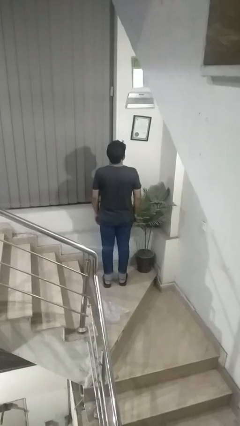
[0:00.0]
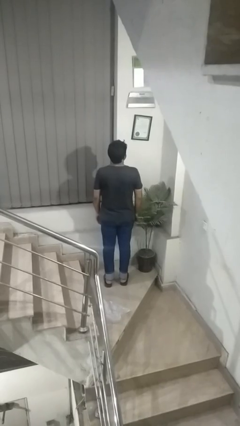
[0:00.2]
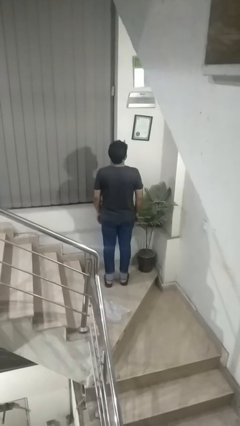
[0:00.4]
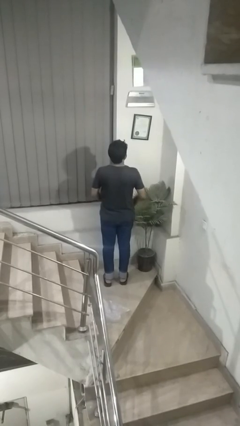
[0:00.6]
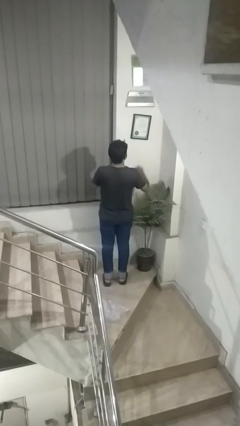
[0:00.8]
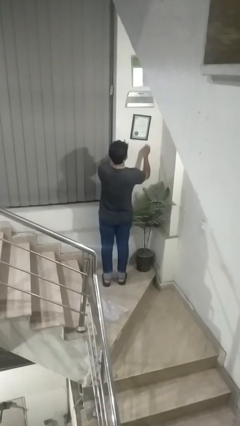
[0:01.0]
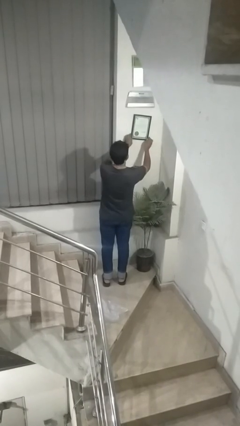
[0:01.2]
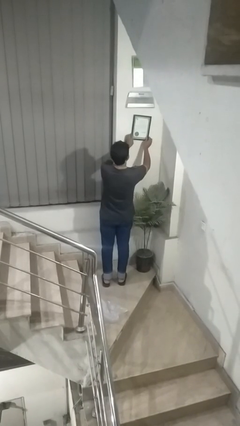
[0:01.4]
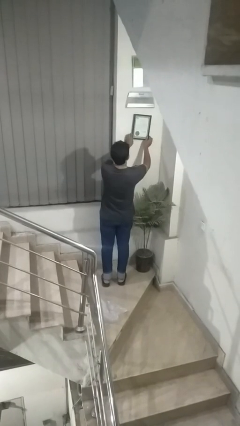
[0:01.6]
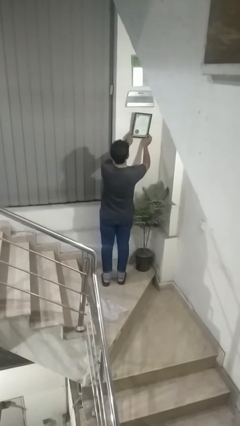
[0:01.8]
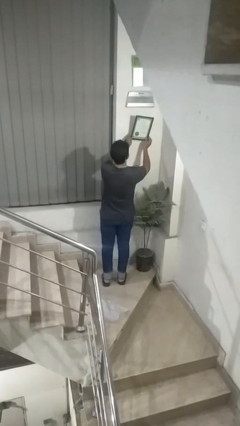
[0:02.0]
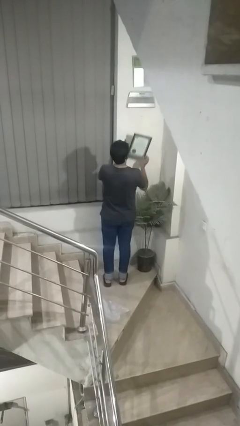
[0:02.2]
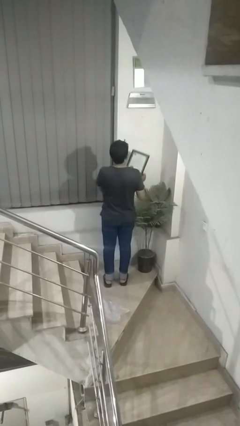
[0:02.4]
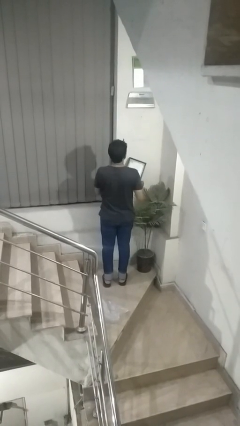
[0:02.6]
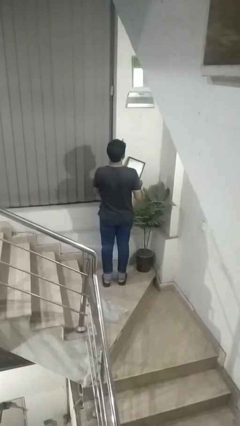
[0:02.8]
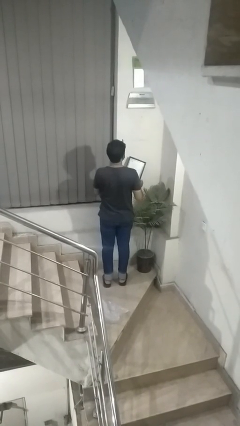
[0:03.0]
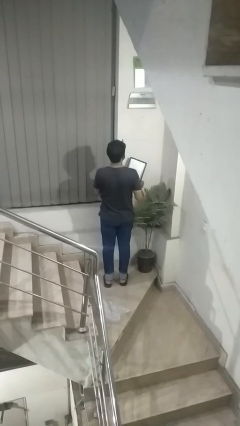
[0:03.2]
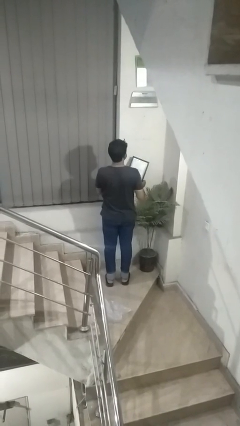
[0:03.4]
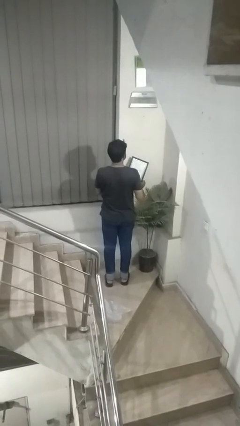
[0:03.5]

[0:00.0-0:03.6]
person takes down picture frame

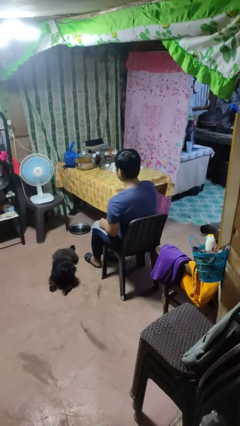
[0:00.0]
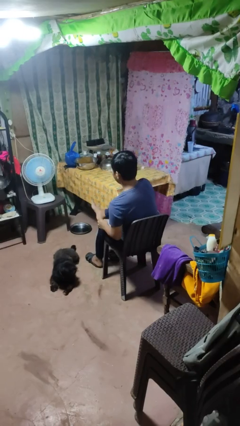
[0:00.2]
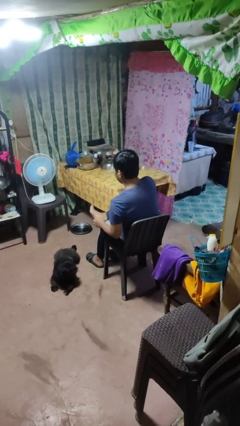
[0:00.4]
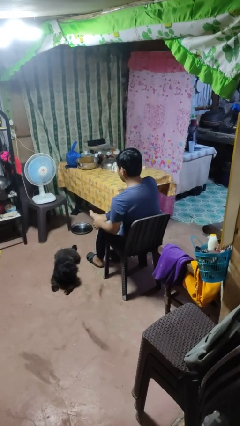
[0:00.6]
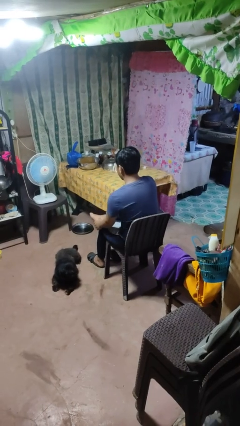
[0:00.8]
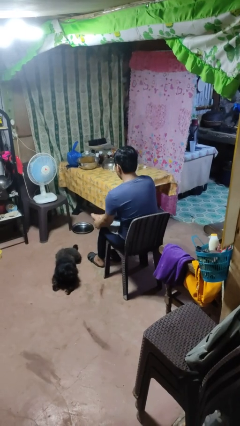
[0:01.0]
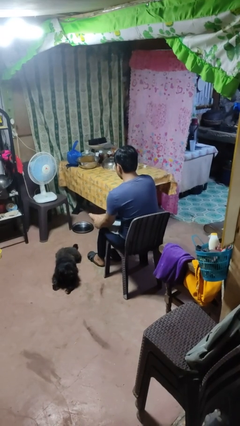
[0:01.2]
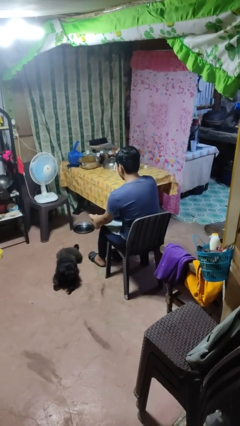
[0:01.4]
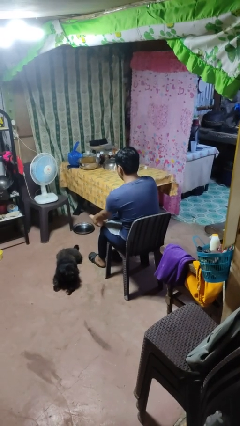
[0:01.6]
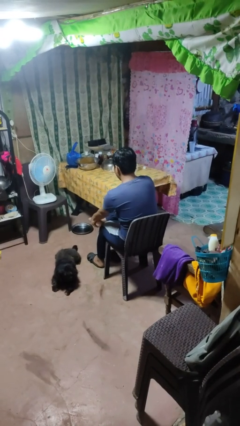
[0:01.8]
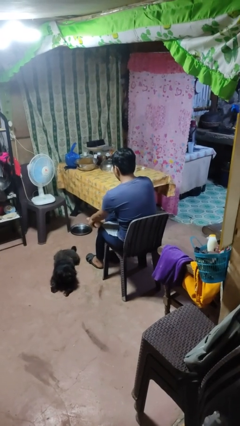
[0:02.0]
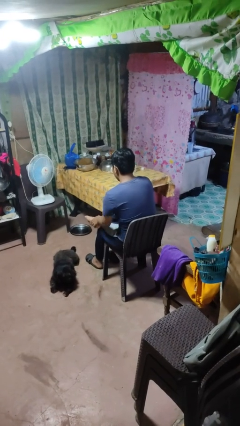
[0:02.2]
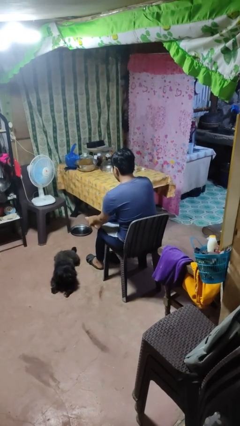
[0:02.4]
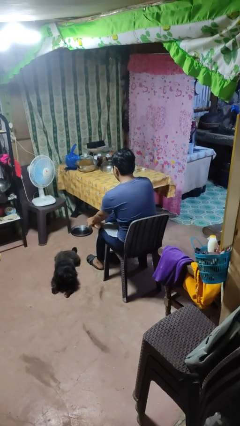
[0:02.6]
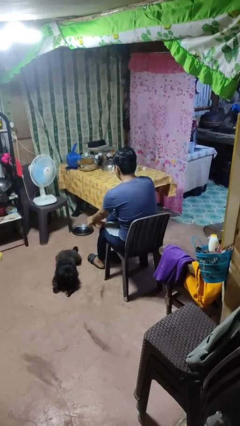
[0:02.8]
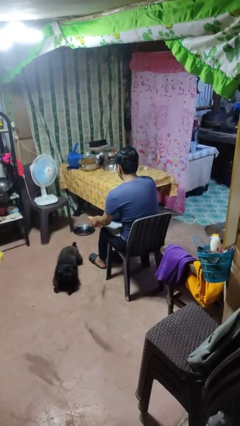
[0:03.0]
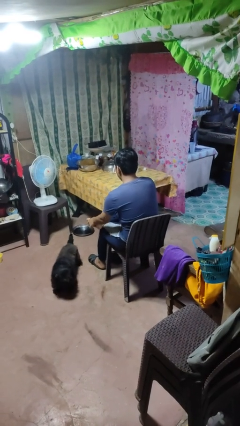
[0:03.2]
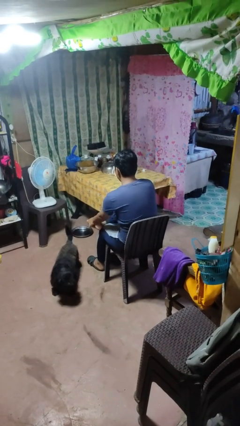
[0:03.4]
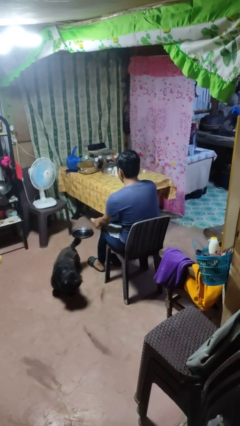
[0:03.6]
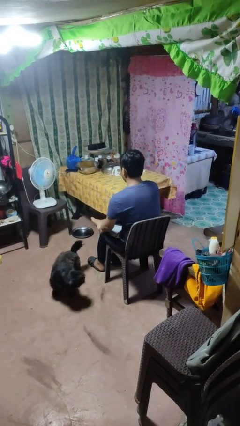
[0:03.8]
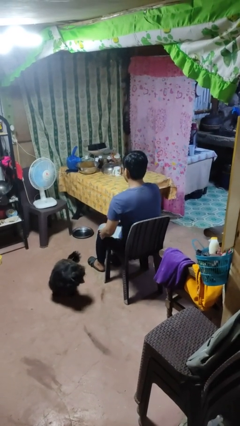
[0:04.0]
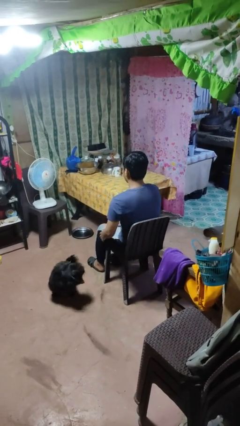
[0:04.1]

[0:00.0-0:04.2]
person rubs foot

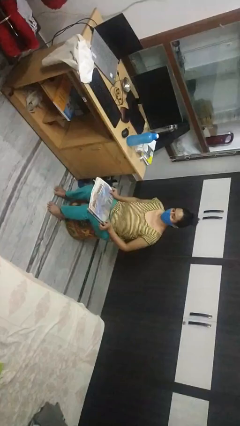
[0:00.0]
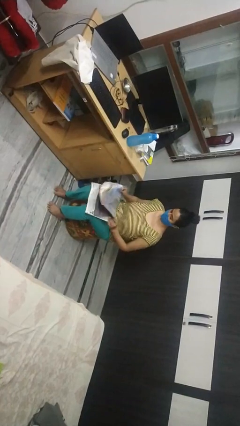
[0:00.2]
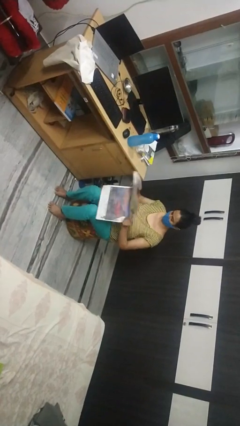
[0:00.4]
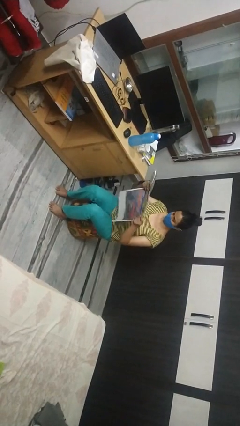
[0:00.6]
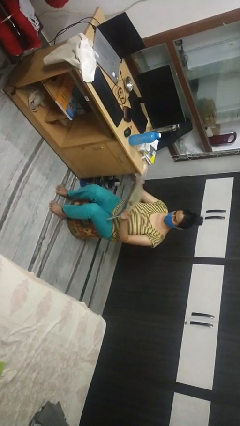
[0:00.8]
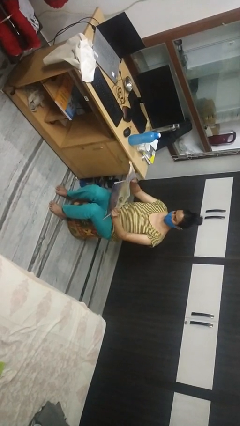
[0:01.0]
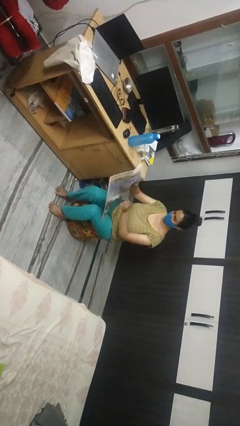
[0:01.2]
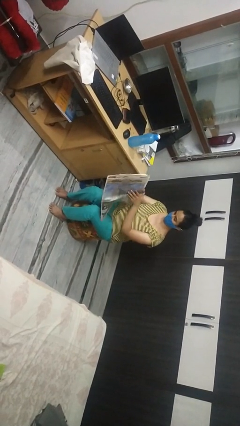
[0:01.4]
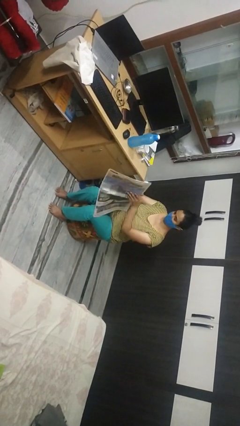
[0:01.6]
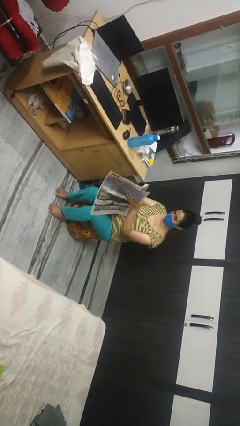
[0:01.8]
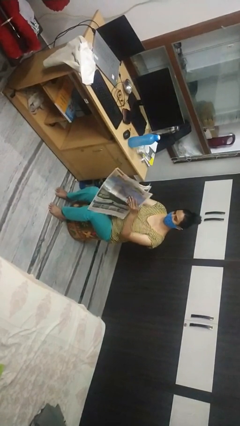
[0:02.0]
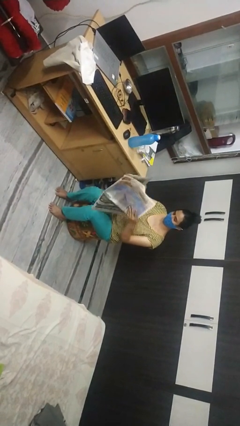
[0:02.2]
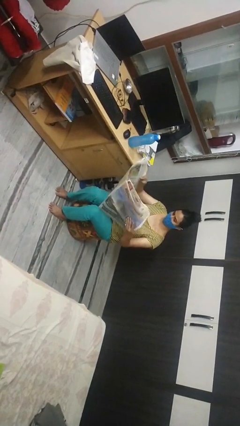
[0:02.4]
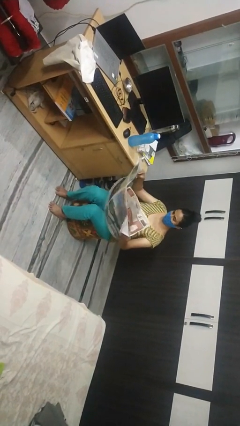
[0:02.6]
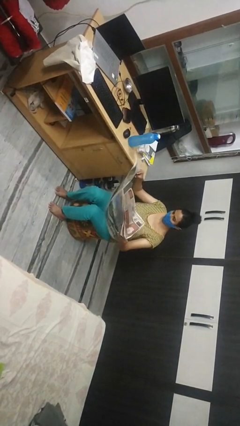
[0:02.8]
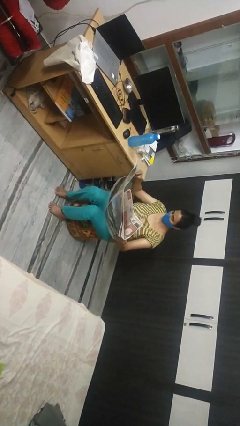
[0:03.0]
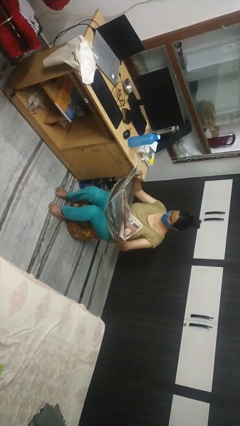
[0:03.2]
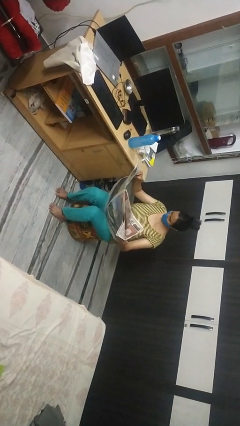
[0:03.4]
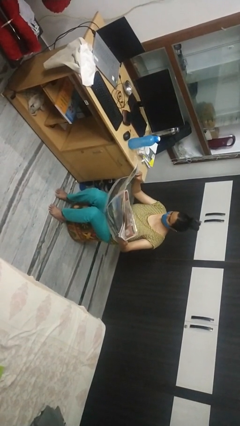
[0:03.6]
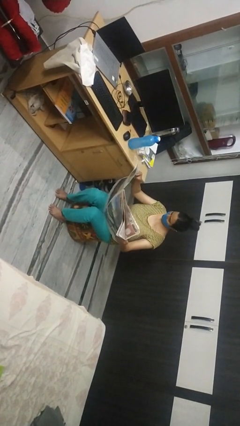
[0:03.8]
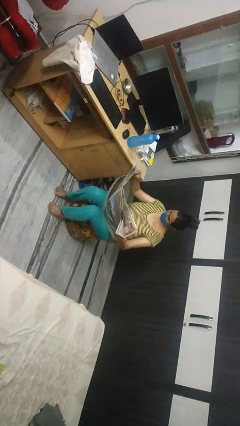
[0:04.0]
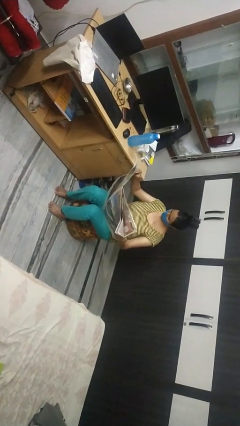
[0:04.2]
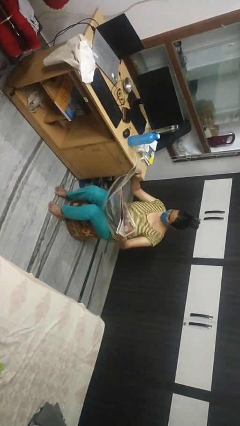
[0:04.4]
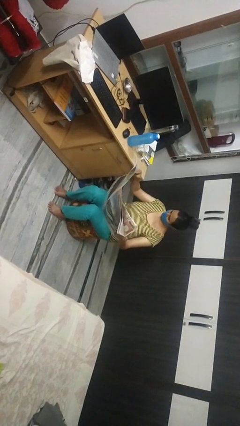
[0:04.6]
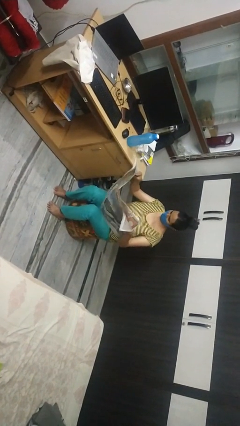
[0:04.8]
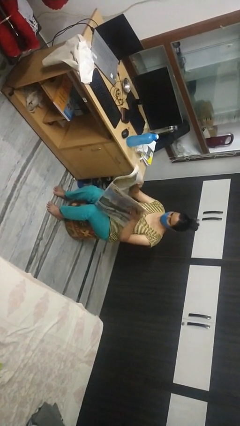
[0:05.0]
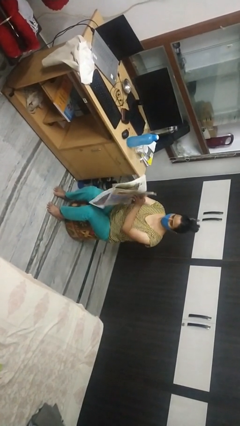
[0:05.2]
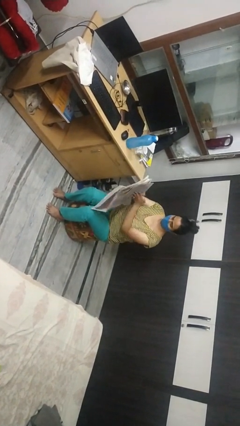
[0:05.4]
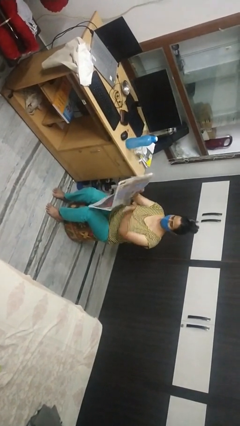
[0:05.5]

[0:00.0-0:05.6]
person reads newspaper

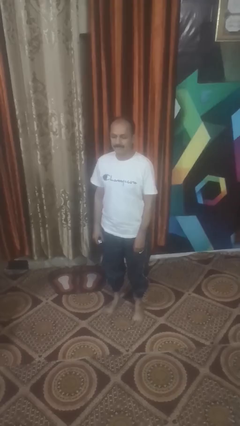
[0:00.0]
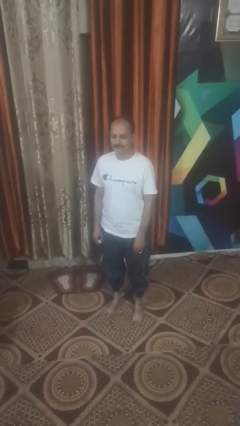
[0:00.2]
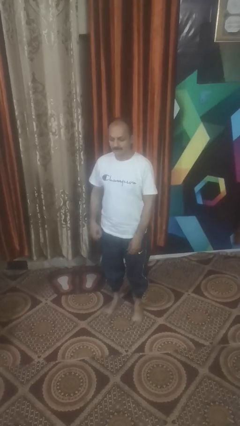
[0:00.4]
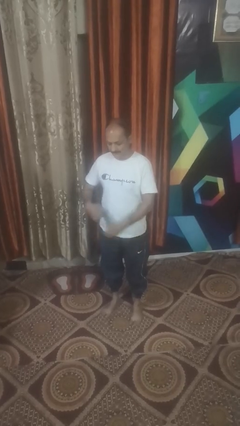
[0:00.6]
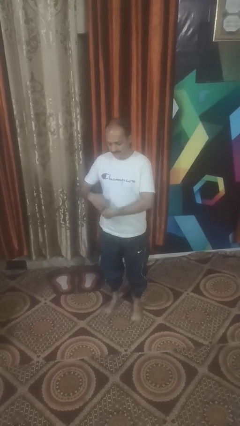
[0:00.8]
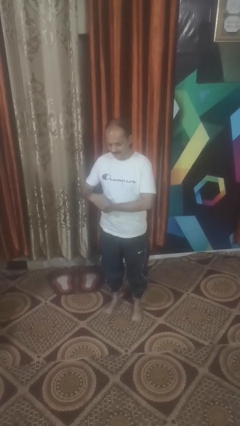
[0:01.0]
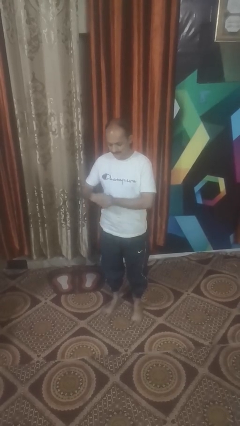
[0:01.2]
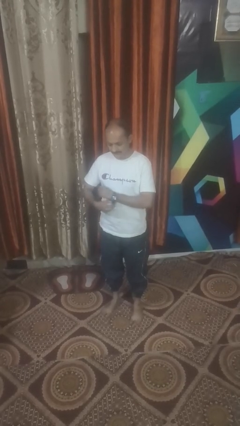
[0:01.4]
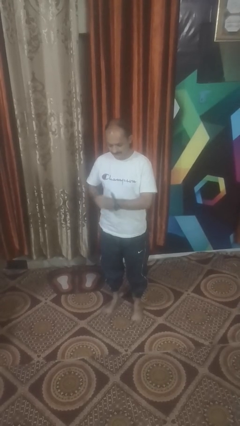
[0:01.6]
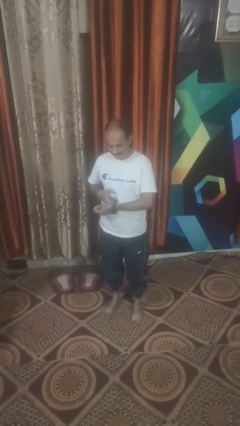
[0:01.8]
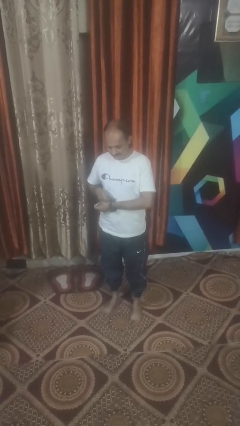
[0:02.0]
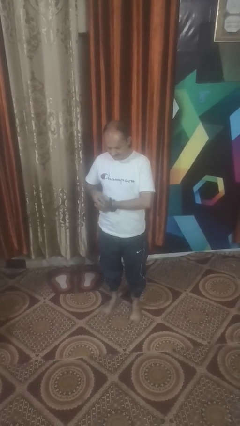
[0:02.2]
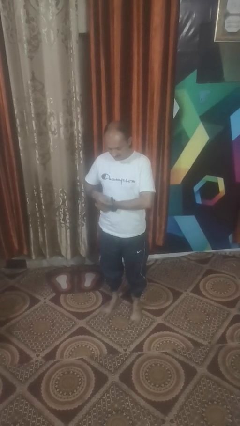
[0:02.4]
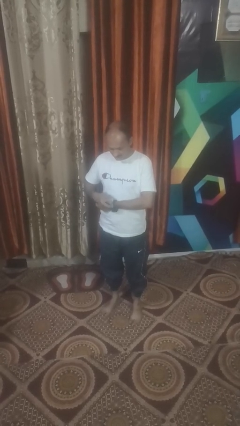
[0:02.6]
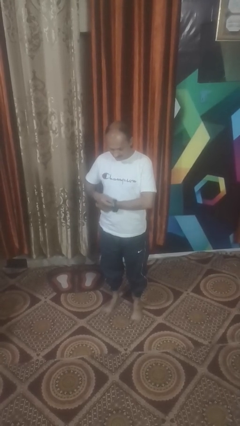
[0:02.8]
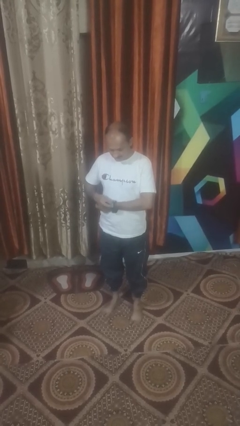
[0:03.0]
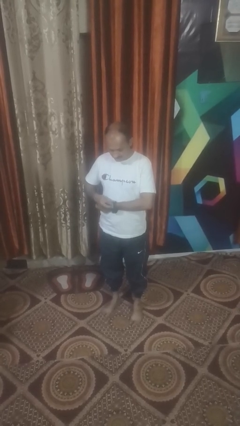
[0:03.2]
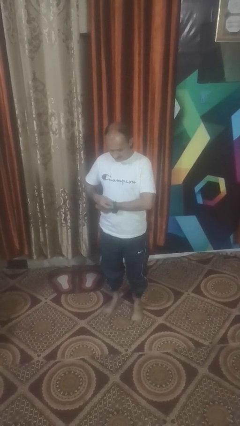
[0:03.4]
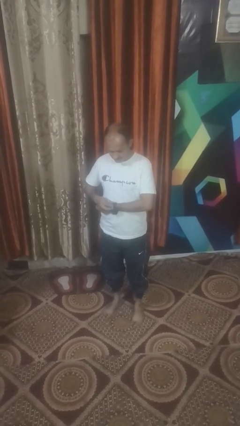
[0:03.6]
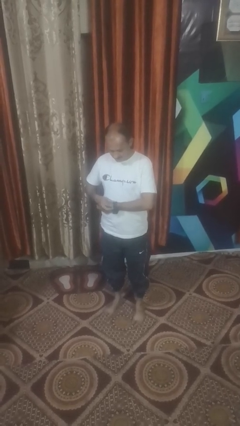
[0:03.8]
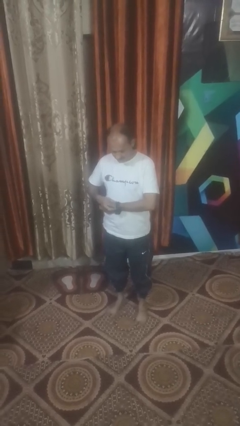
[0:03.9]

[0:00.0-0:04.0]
person puts on wristwatch

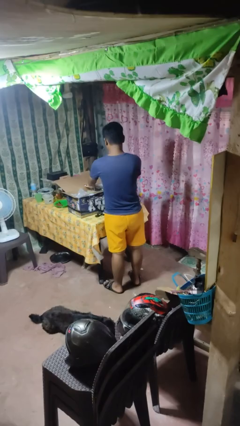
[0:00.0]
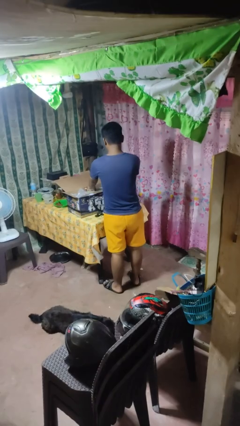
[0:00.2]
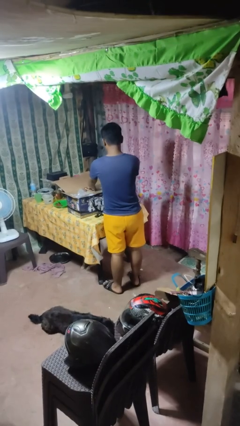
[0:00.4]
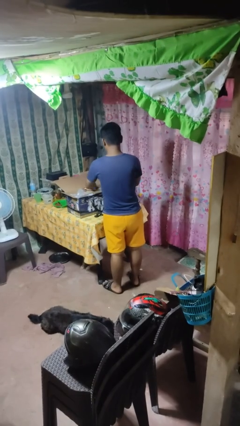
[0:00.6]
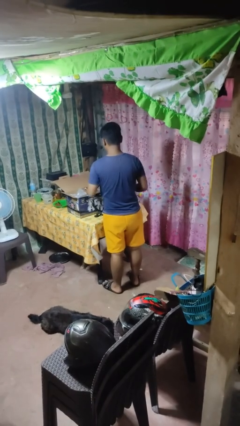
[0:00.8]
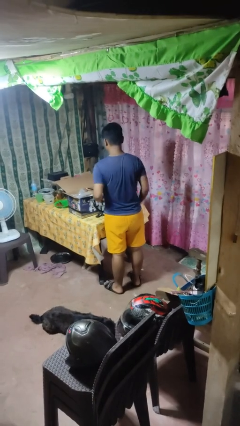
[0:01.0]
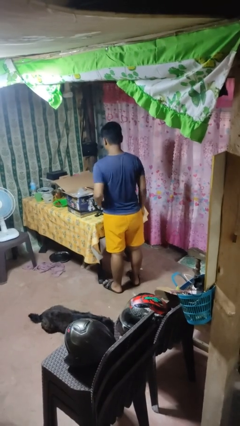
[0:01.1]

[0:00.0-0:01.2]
person puts object into box
